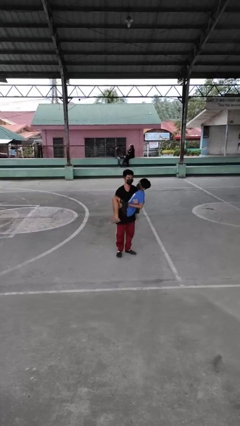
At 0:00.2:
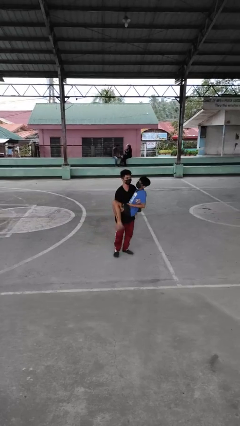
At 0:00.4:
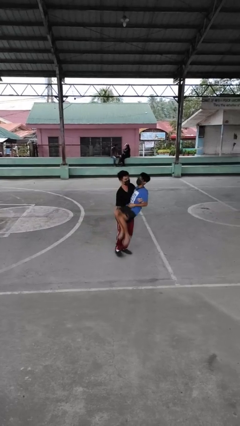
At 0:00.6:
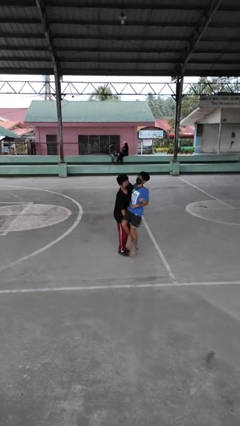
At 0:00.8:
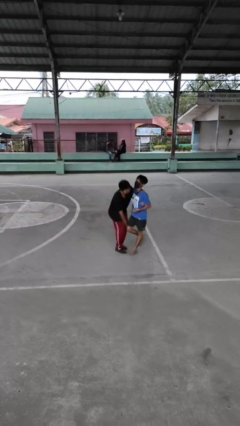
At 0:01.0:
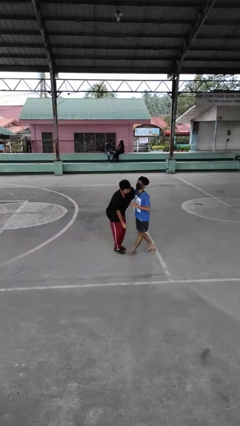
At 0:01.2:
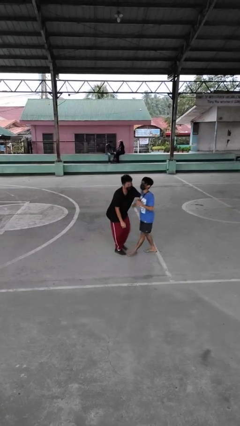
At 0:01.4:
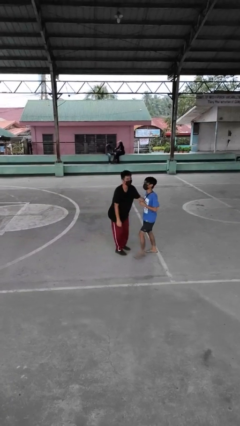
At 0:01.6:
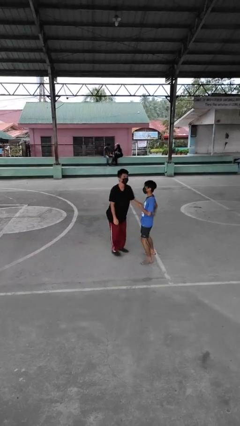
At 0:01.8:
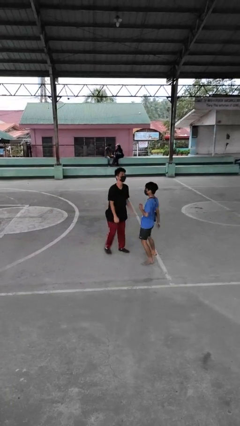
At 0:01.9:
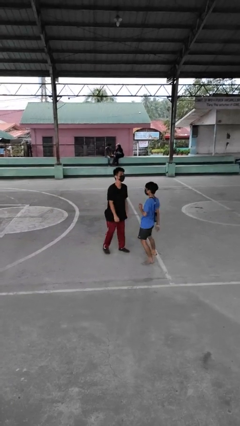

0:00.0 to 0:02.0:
person puts down person

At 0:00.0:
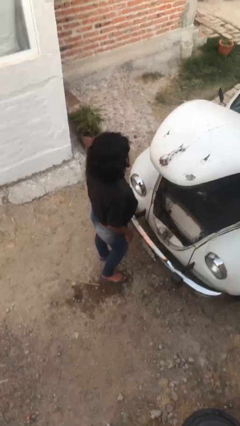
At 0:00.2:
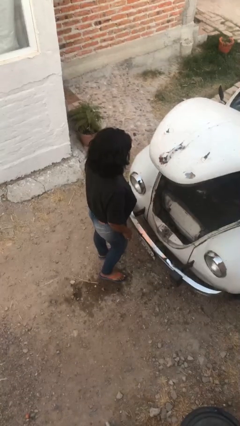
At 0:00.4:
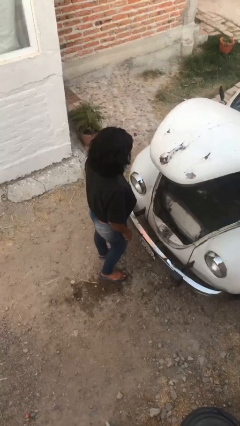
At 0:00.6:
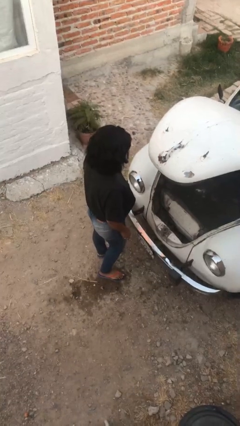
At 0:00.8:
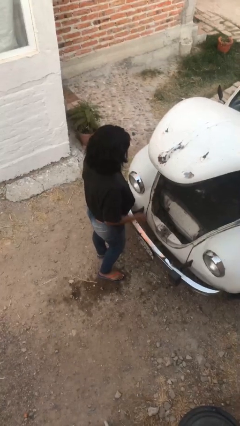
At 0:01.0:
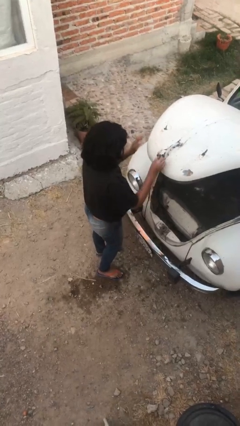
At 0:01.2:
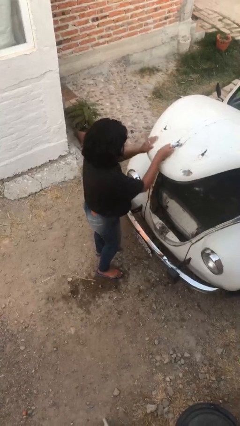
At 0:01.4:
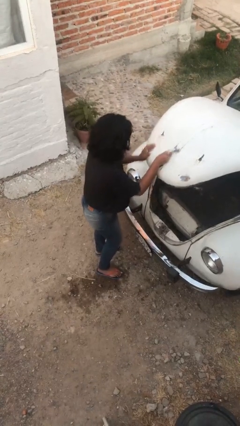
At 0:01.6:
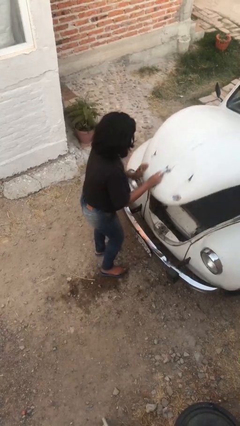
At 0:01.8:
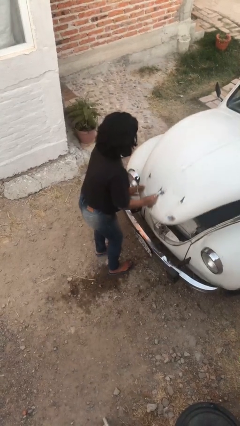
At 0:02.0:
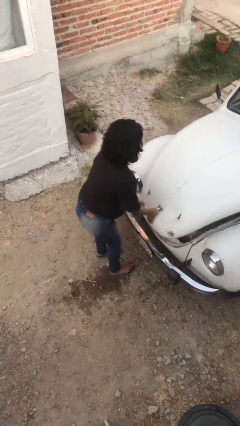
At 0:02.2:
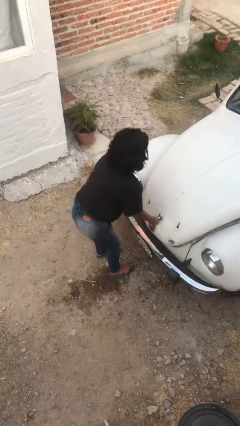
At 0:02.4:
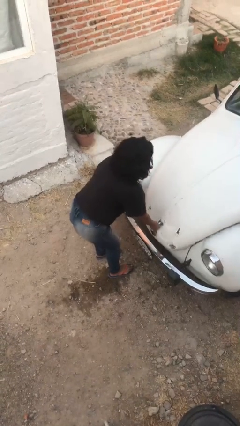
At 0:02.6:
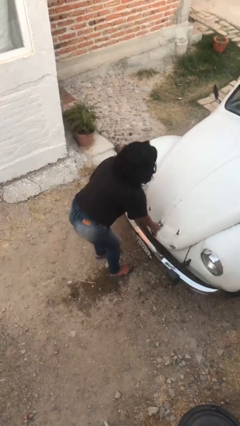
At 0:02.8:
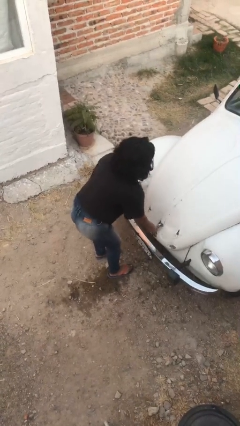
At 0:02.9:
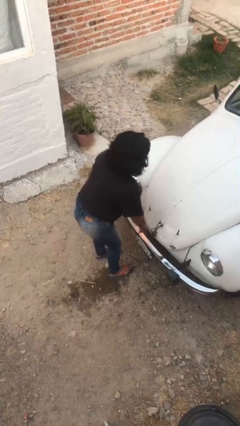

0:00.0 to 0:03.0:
person closes car trunk

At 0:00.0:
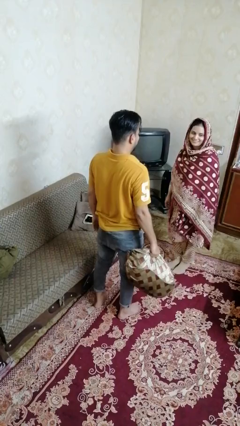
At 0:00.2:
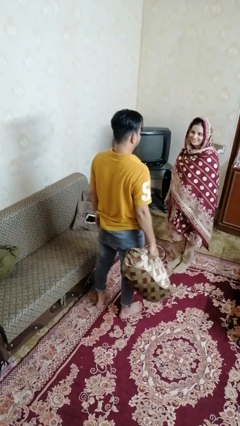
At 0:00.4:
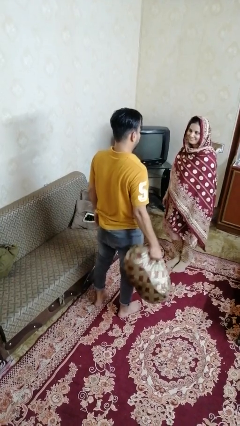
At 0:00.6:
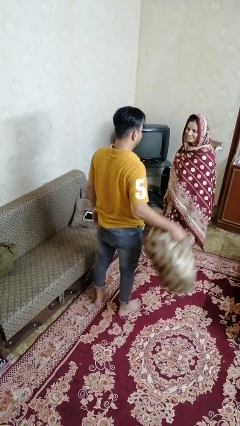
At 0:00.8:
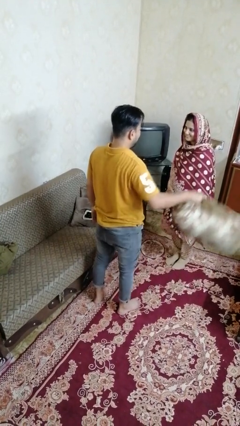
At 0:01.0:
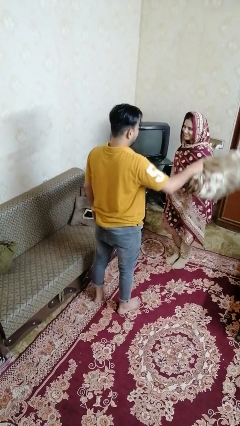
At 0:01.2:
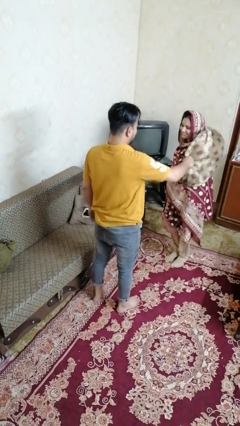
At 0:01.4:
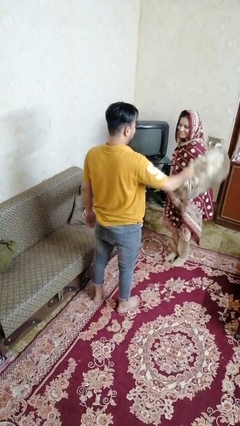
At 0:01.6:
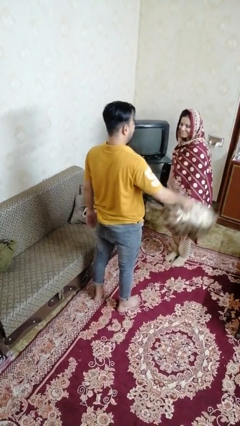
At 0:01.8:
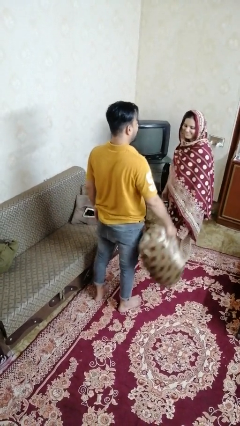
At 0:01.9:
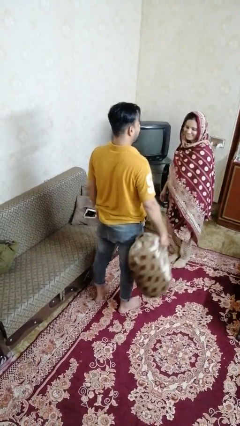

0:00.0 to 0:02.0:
person hits person with pillow

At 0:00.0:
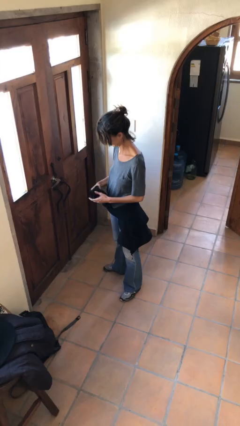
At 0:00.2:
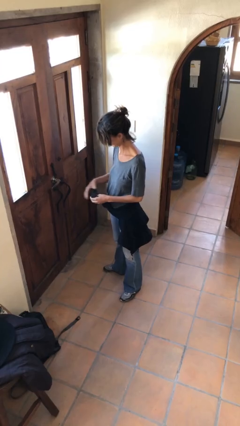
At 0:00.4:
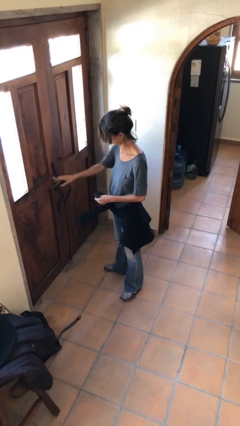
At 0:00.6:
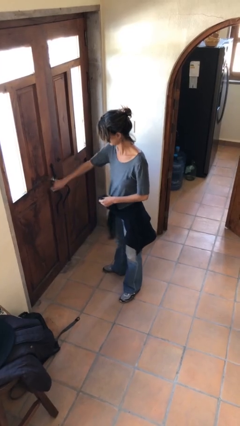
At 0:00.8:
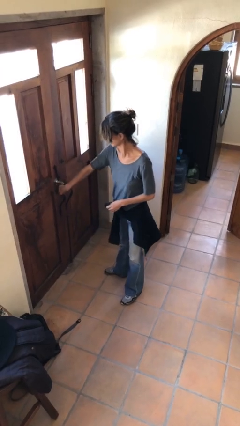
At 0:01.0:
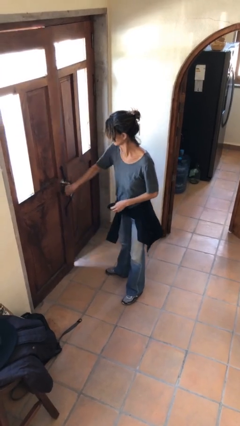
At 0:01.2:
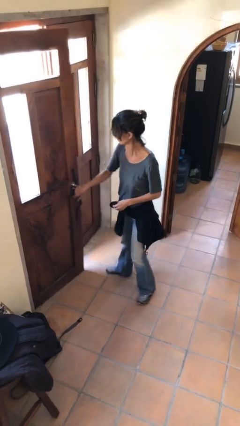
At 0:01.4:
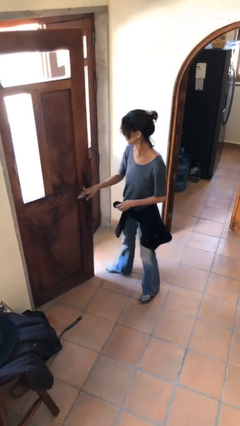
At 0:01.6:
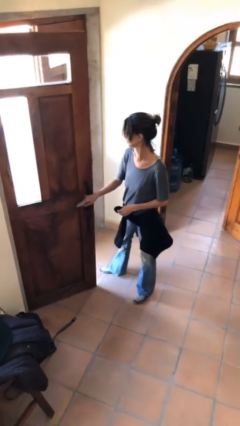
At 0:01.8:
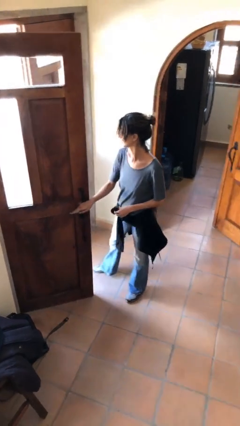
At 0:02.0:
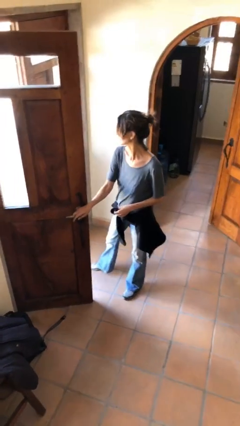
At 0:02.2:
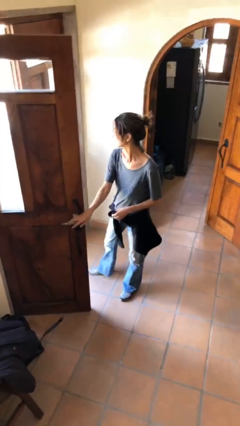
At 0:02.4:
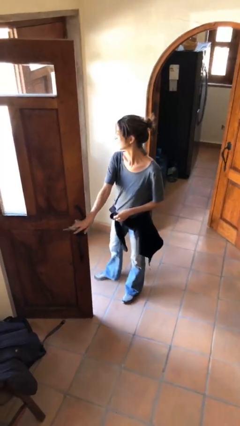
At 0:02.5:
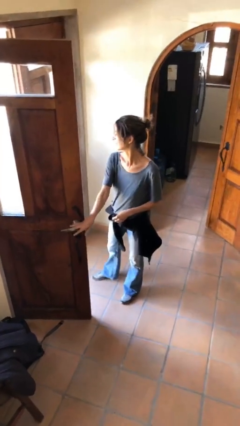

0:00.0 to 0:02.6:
person opens facility door

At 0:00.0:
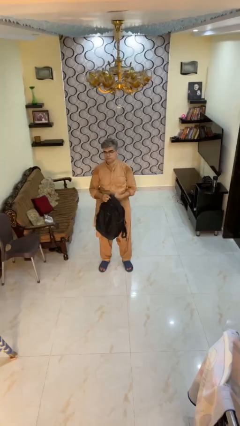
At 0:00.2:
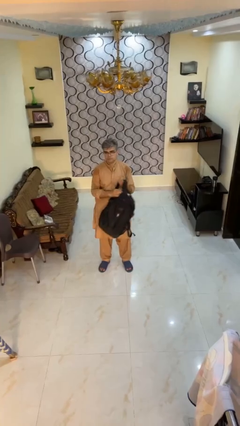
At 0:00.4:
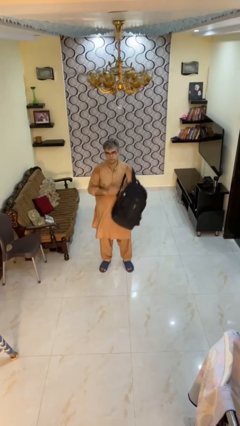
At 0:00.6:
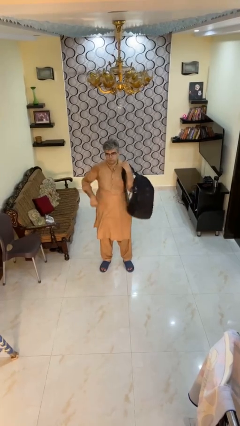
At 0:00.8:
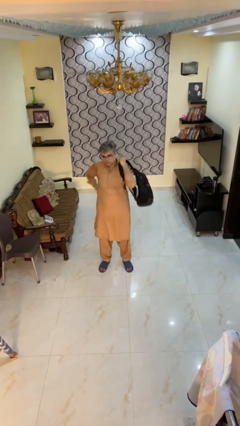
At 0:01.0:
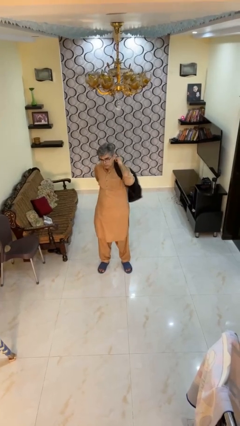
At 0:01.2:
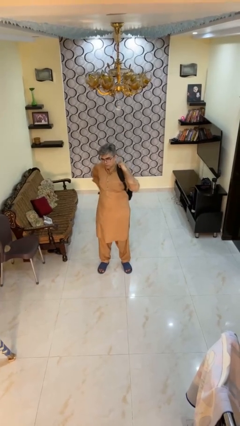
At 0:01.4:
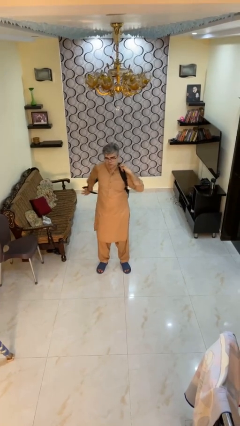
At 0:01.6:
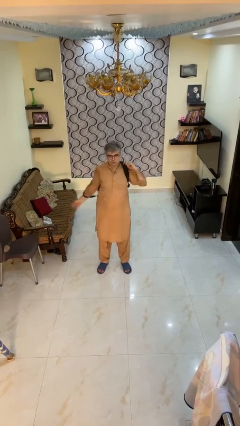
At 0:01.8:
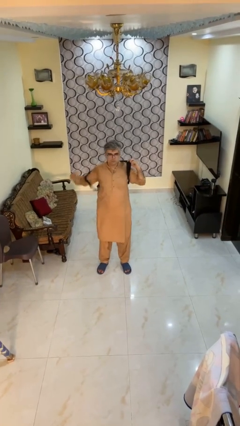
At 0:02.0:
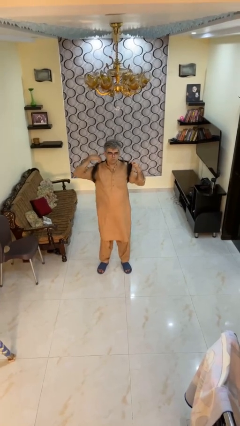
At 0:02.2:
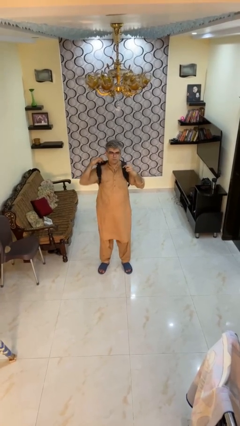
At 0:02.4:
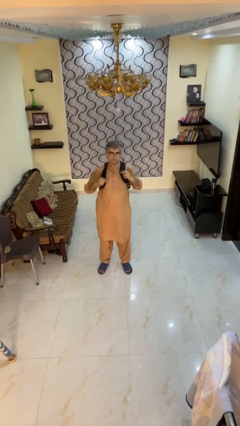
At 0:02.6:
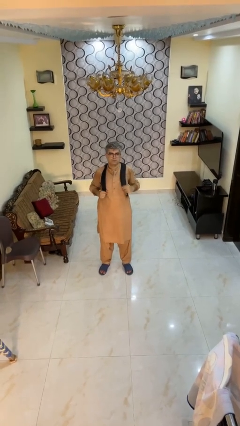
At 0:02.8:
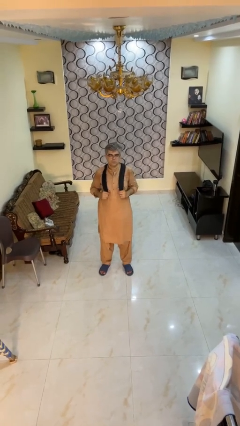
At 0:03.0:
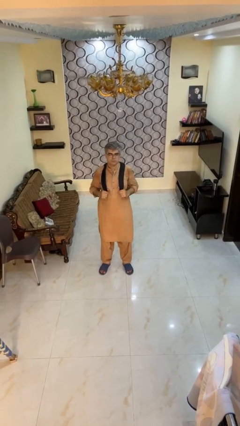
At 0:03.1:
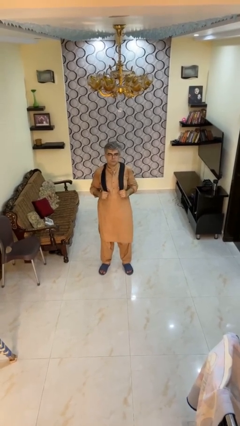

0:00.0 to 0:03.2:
person puts on backpack

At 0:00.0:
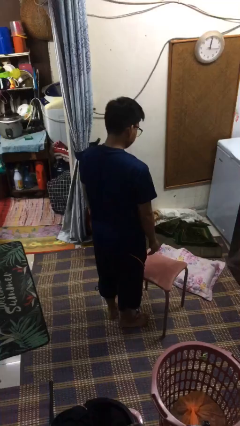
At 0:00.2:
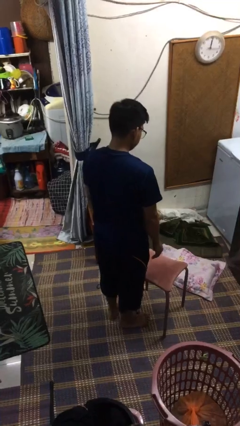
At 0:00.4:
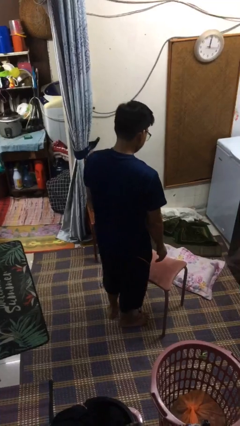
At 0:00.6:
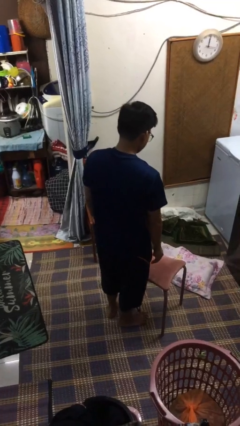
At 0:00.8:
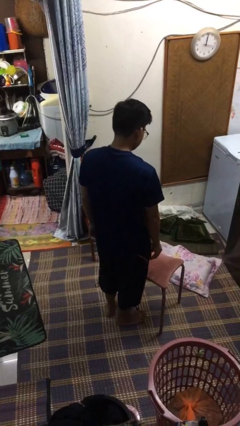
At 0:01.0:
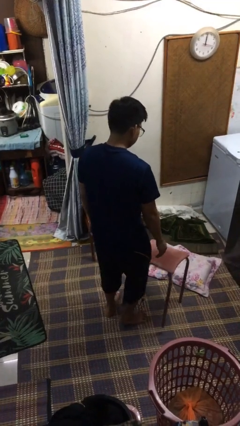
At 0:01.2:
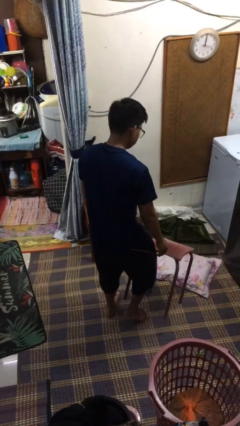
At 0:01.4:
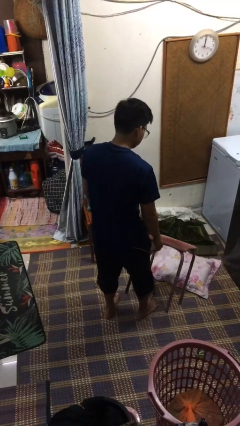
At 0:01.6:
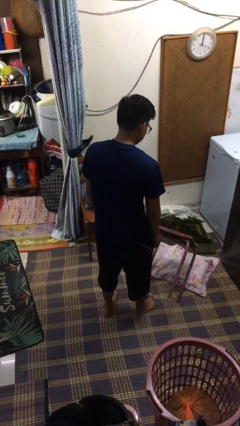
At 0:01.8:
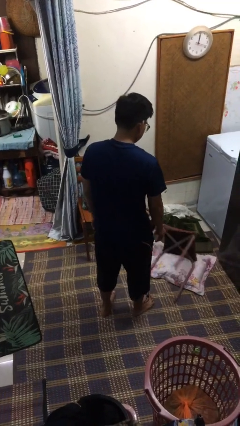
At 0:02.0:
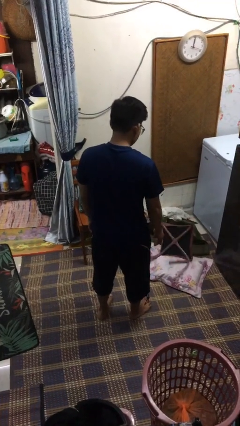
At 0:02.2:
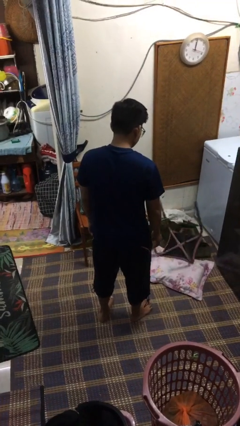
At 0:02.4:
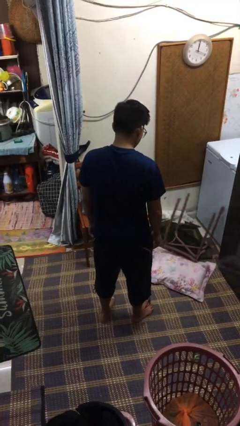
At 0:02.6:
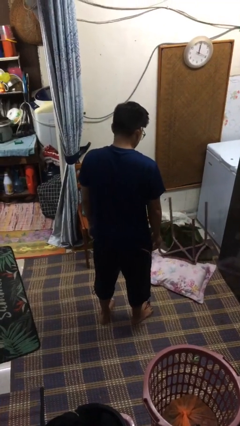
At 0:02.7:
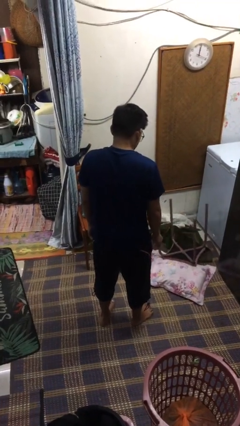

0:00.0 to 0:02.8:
person knocks over furniture

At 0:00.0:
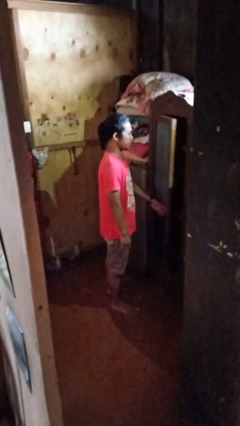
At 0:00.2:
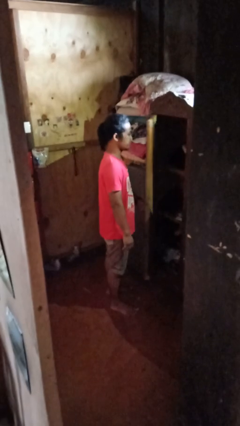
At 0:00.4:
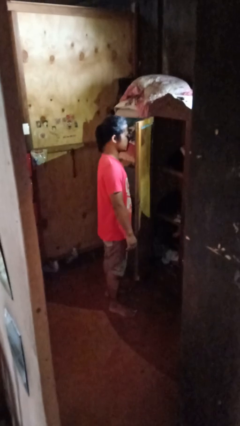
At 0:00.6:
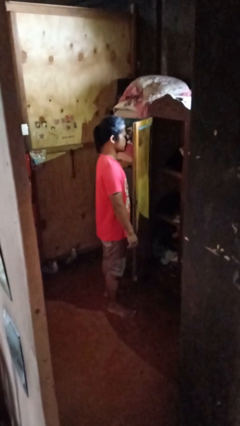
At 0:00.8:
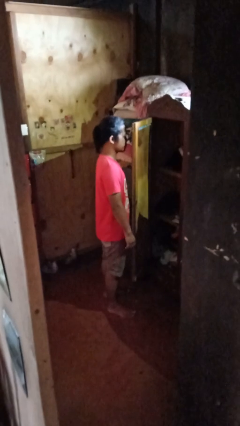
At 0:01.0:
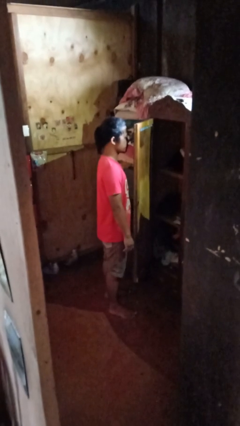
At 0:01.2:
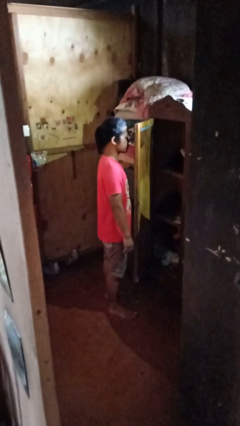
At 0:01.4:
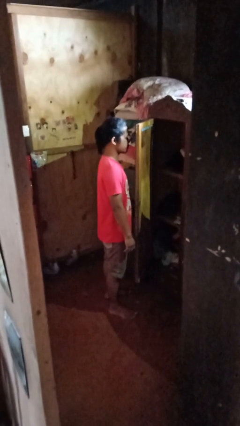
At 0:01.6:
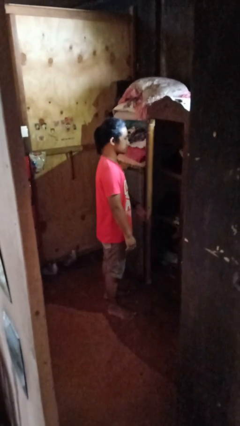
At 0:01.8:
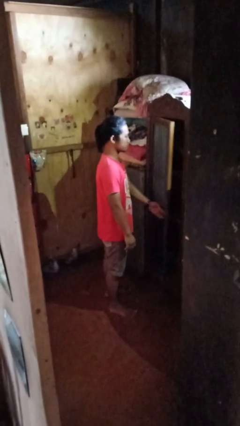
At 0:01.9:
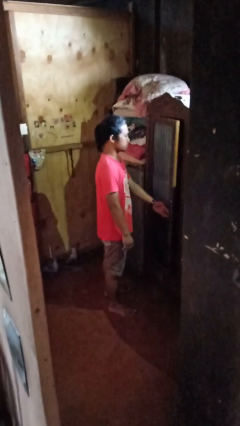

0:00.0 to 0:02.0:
person opens closet door
